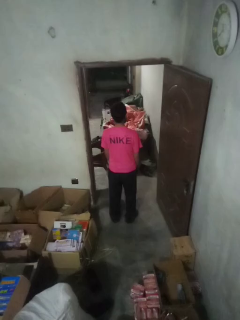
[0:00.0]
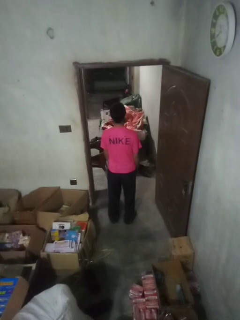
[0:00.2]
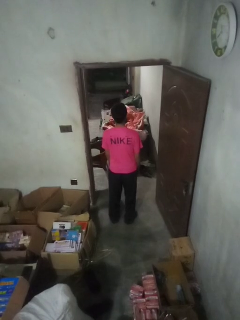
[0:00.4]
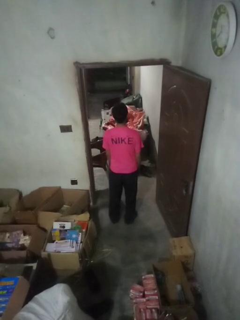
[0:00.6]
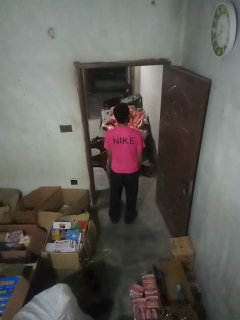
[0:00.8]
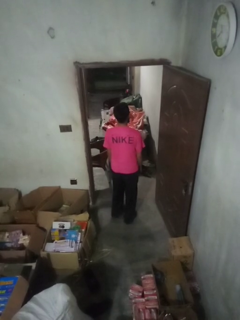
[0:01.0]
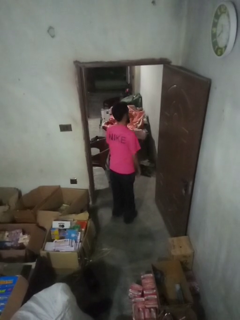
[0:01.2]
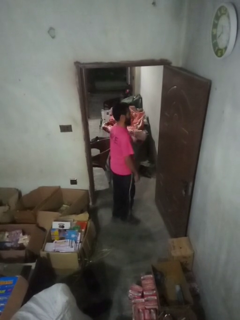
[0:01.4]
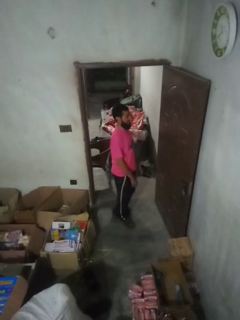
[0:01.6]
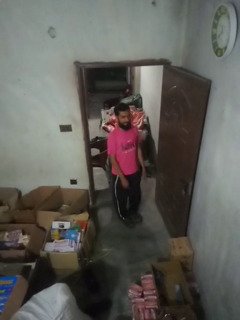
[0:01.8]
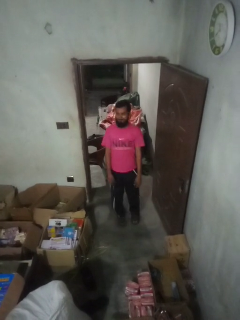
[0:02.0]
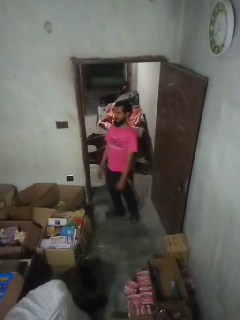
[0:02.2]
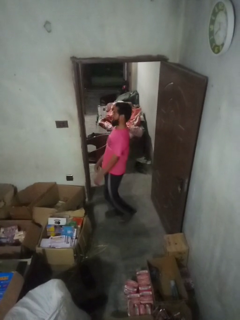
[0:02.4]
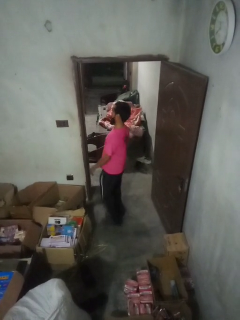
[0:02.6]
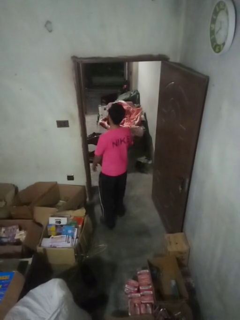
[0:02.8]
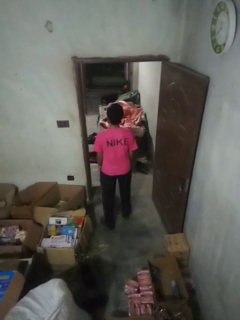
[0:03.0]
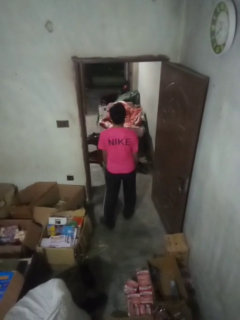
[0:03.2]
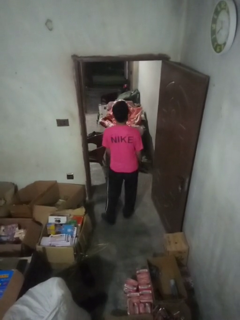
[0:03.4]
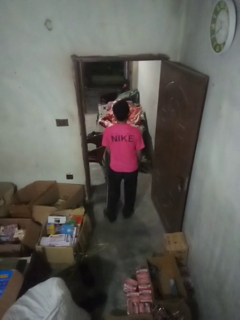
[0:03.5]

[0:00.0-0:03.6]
person twirls

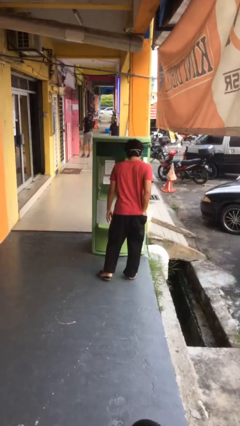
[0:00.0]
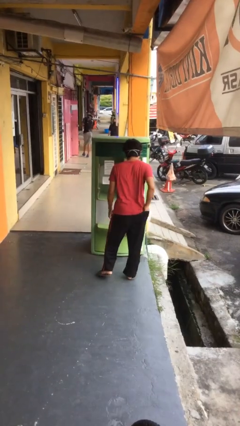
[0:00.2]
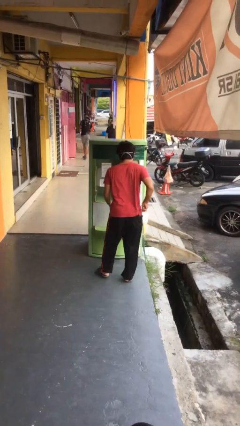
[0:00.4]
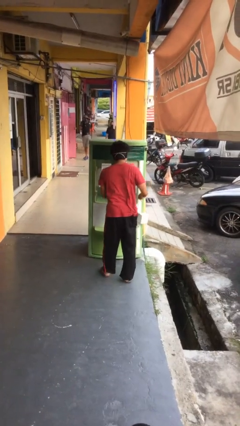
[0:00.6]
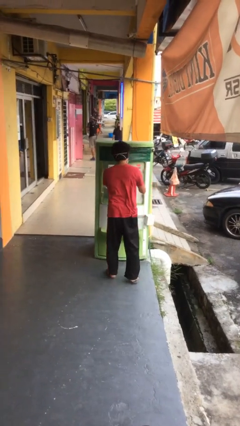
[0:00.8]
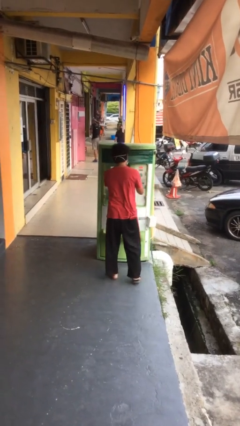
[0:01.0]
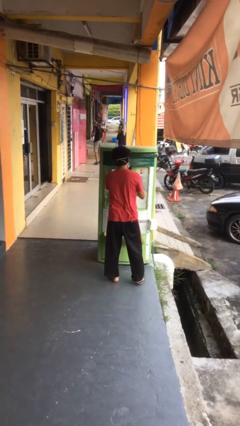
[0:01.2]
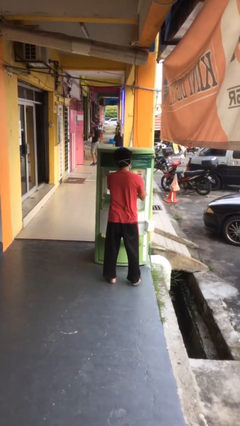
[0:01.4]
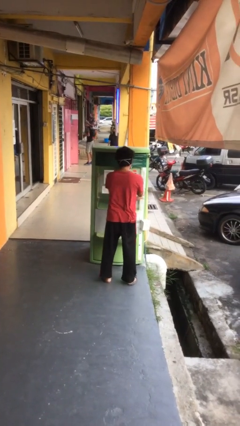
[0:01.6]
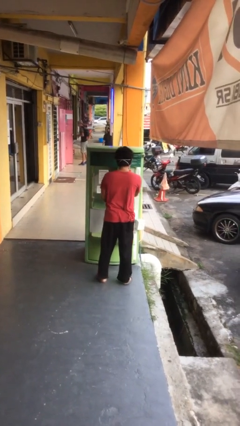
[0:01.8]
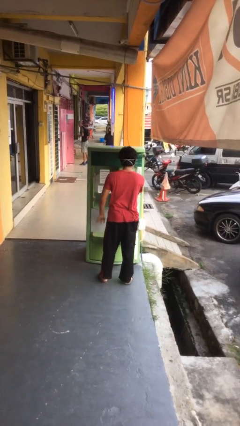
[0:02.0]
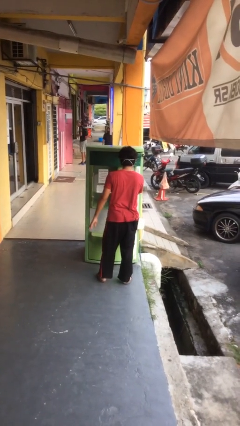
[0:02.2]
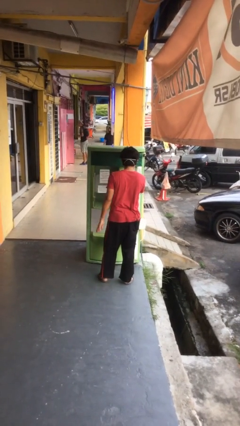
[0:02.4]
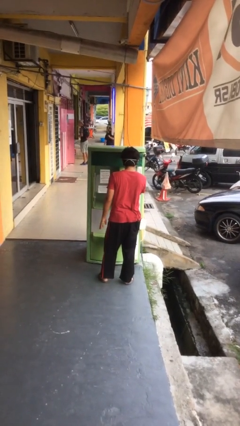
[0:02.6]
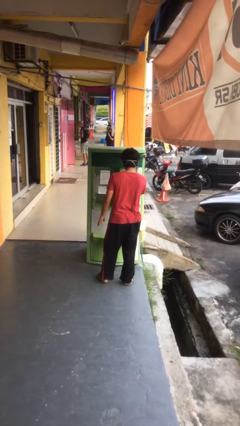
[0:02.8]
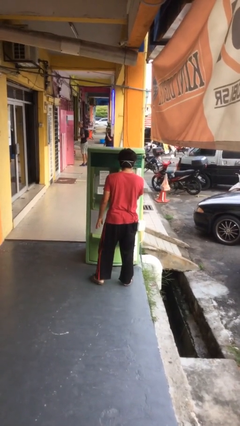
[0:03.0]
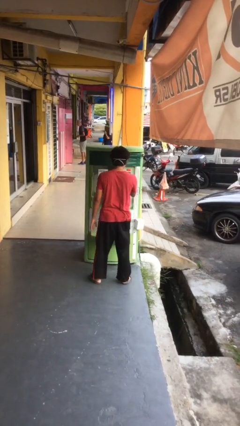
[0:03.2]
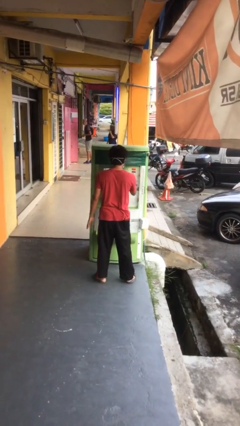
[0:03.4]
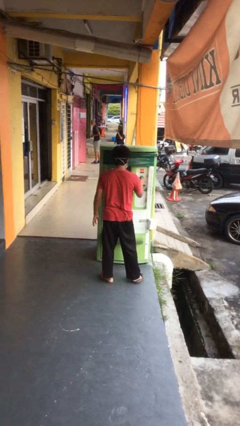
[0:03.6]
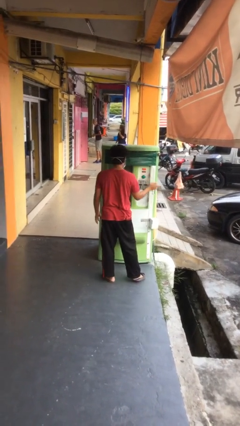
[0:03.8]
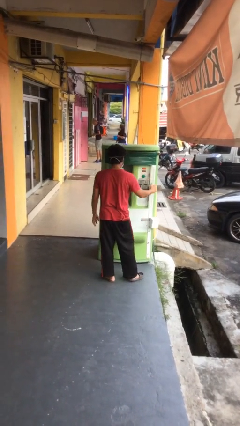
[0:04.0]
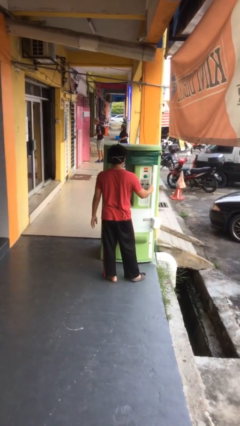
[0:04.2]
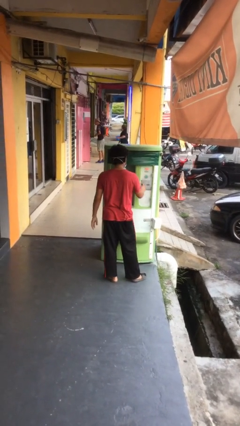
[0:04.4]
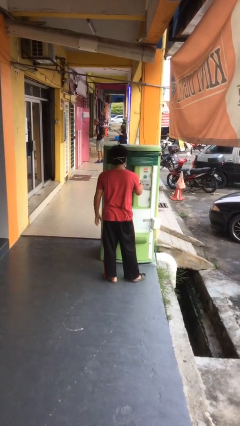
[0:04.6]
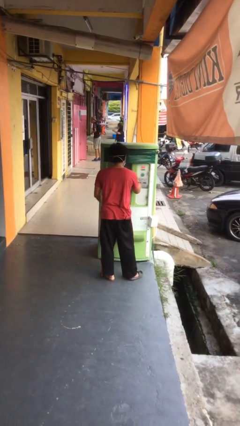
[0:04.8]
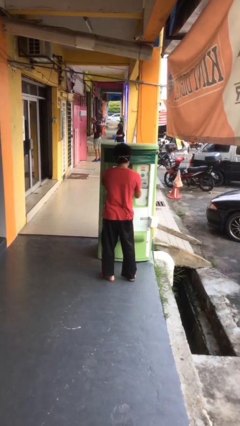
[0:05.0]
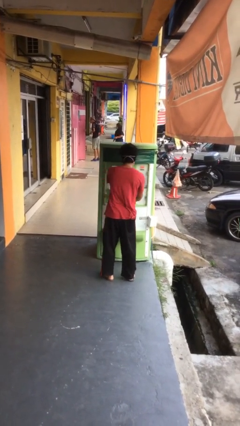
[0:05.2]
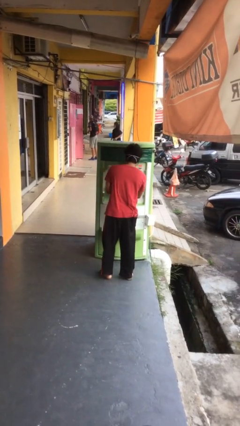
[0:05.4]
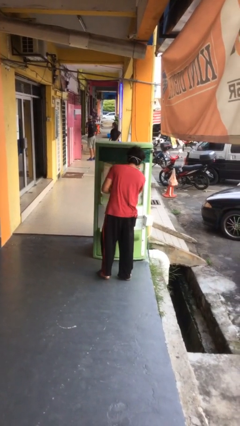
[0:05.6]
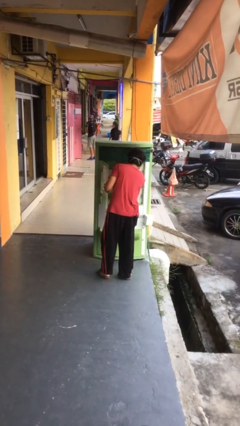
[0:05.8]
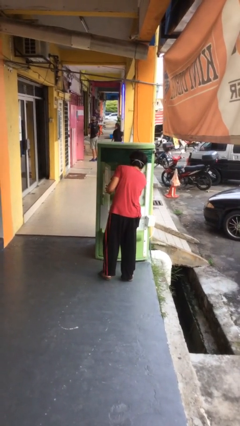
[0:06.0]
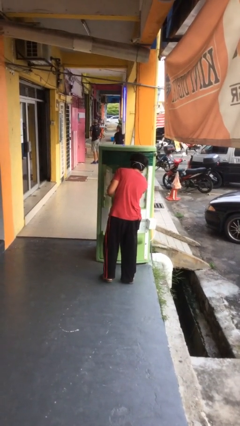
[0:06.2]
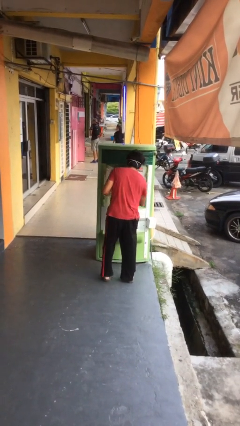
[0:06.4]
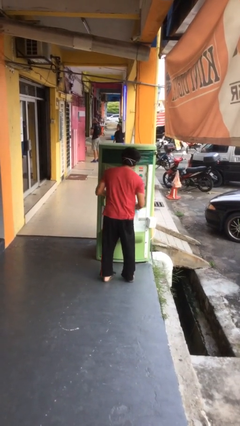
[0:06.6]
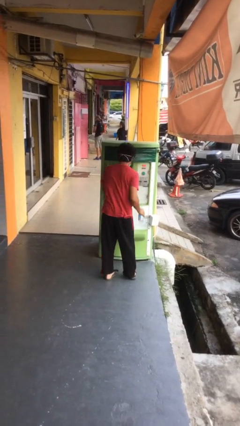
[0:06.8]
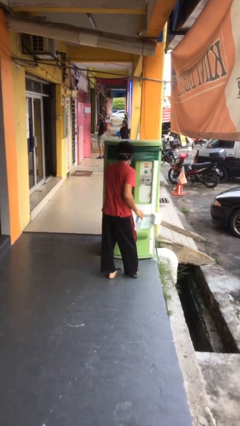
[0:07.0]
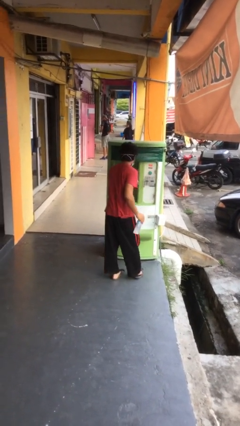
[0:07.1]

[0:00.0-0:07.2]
person purchases from machine

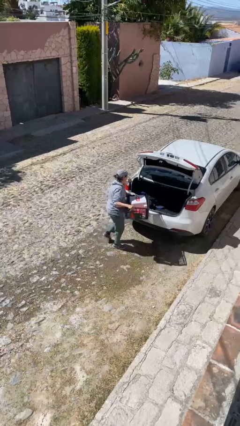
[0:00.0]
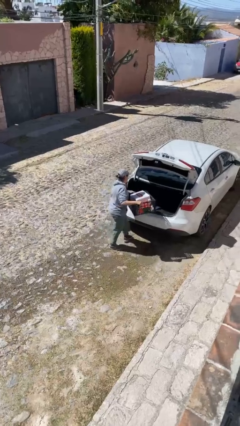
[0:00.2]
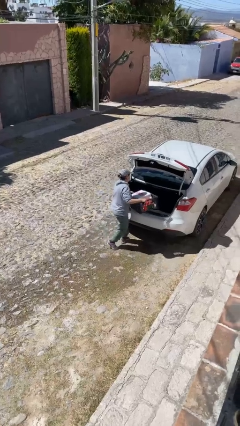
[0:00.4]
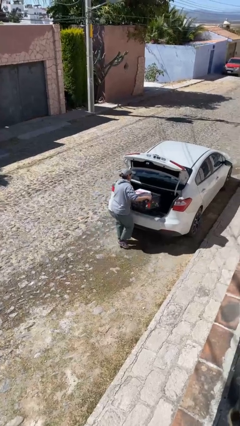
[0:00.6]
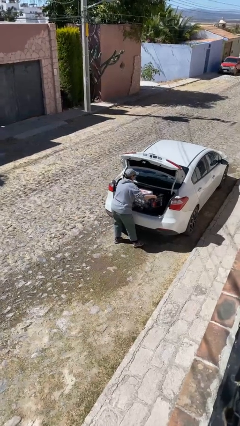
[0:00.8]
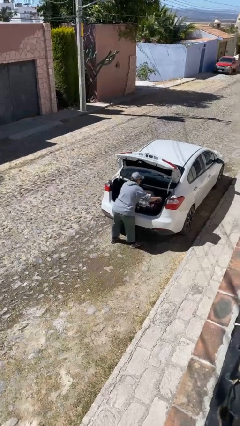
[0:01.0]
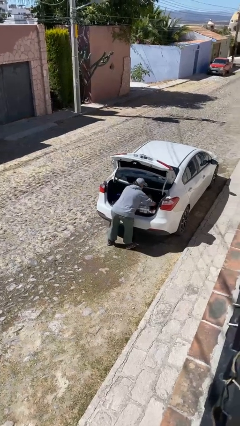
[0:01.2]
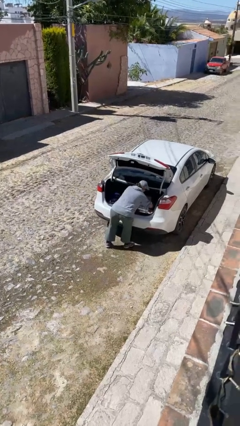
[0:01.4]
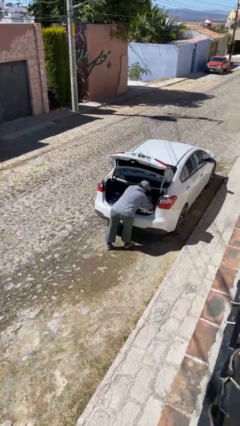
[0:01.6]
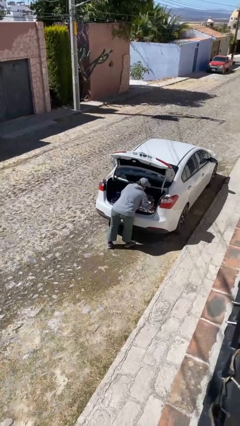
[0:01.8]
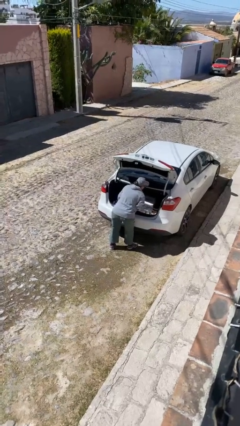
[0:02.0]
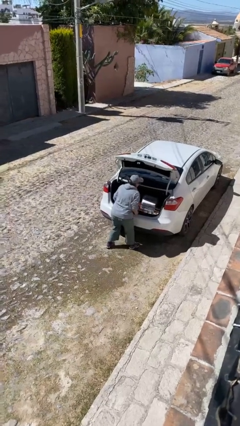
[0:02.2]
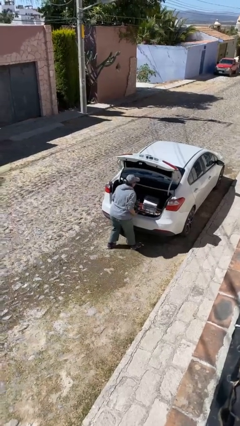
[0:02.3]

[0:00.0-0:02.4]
person loads car

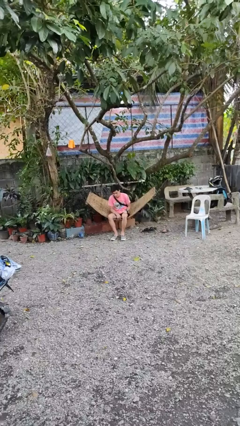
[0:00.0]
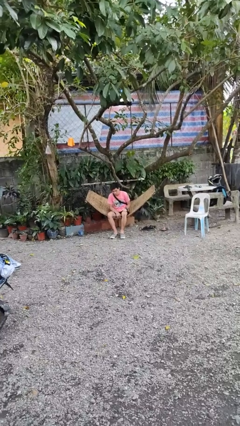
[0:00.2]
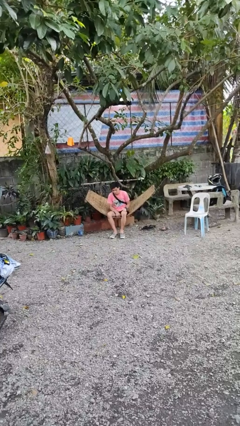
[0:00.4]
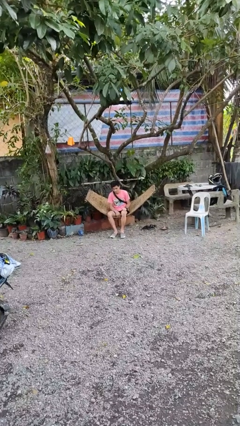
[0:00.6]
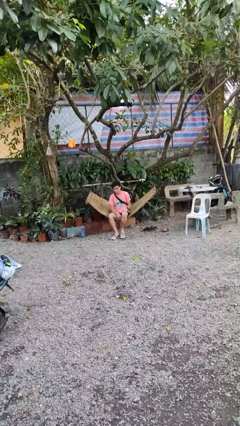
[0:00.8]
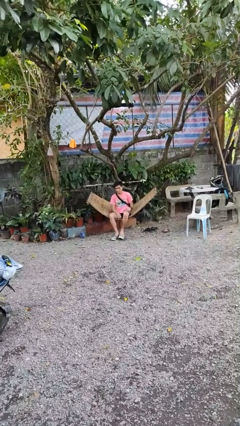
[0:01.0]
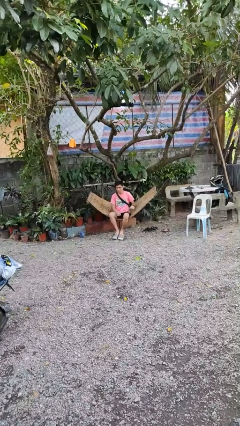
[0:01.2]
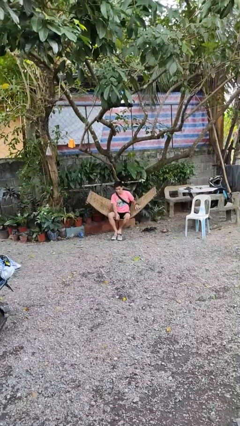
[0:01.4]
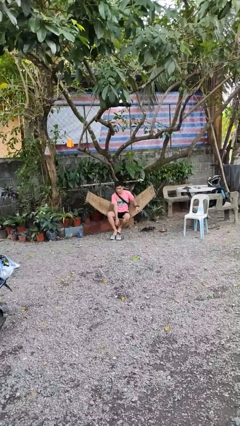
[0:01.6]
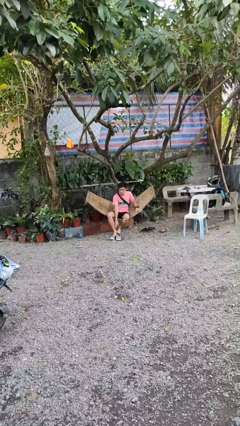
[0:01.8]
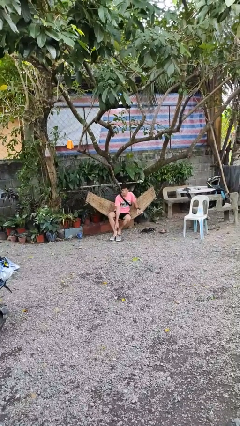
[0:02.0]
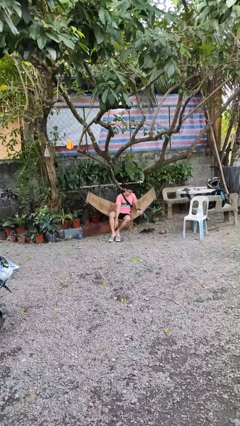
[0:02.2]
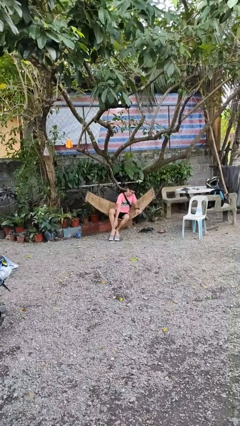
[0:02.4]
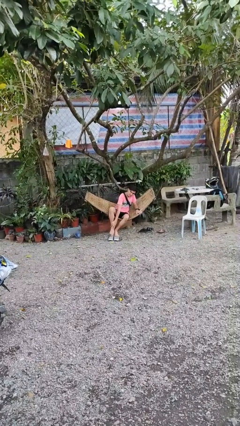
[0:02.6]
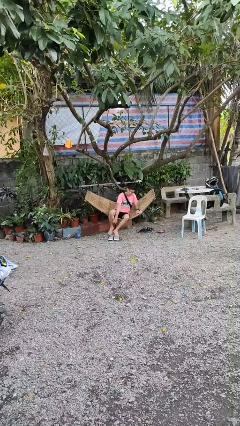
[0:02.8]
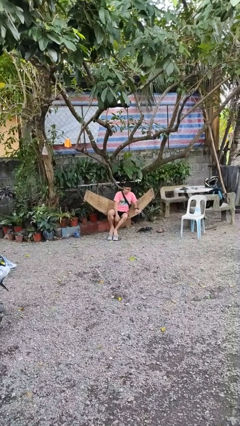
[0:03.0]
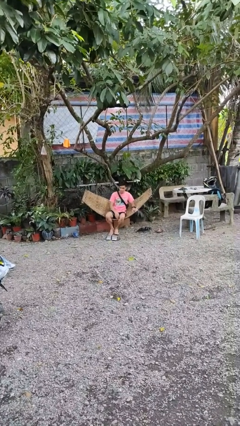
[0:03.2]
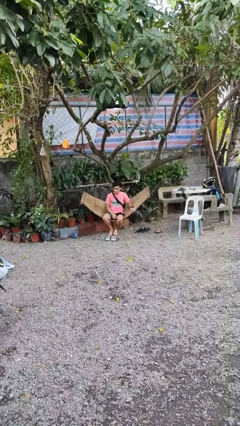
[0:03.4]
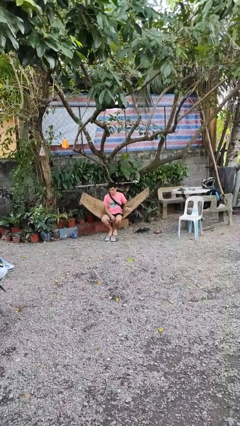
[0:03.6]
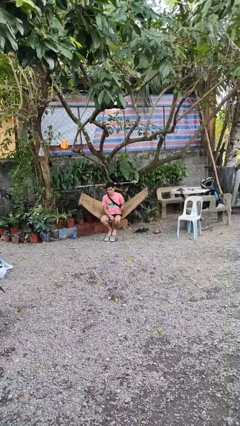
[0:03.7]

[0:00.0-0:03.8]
person takes off shoes

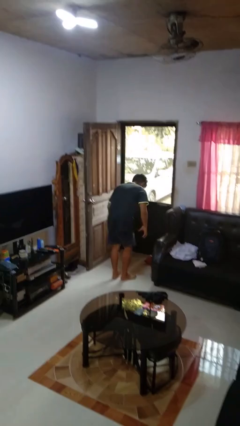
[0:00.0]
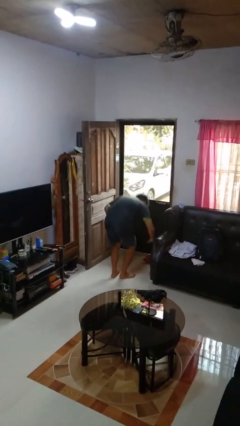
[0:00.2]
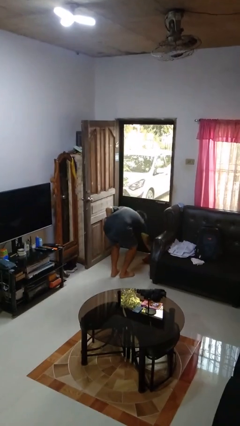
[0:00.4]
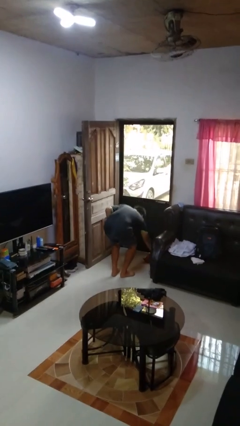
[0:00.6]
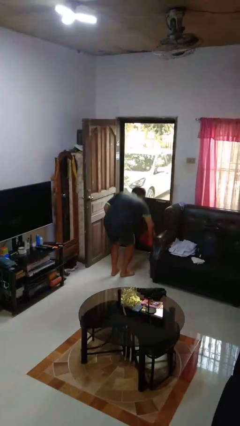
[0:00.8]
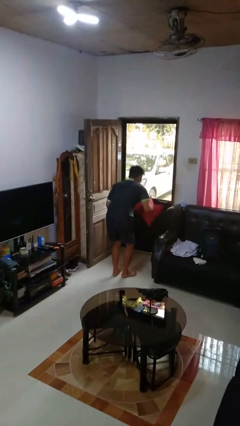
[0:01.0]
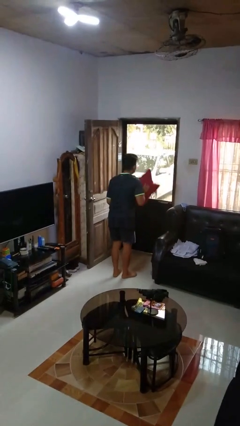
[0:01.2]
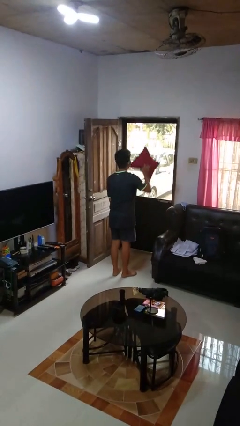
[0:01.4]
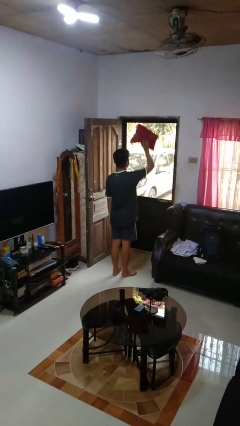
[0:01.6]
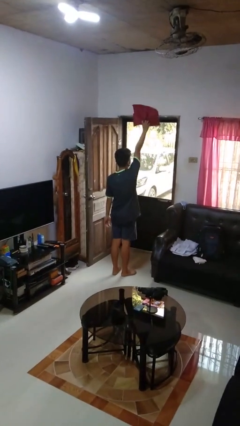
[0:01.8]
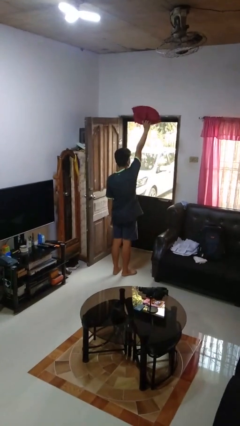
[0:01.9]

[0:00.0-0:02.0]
person picks up object from floor
